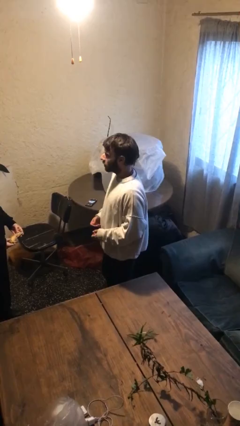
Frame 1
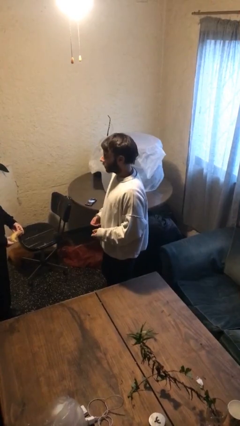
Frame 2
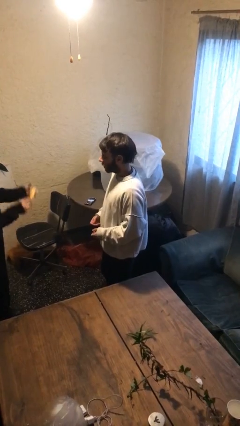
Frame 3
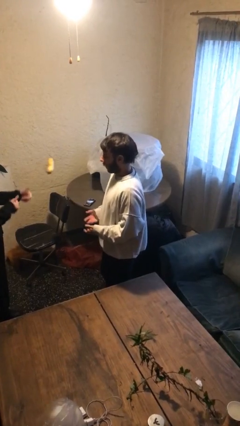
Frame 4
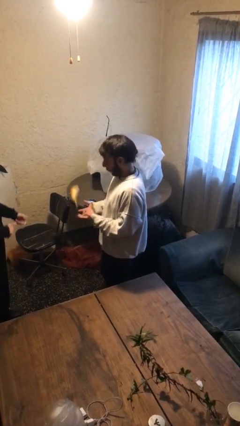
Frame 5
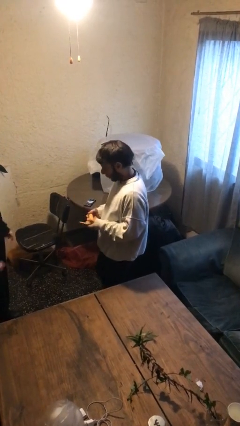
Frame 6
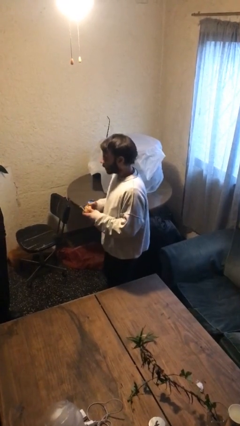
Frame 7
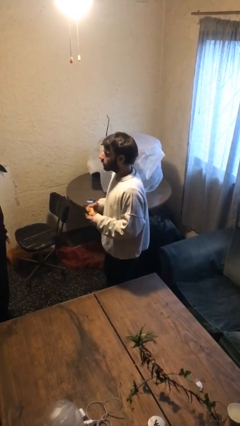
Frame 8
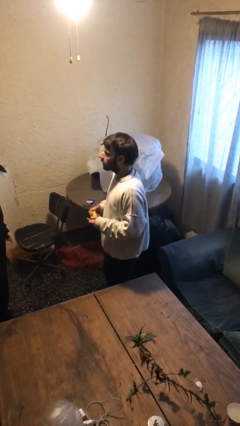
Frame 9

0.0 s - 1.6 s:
person catches object from person

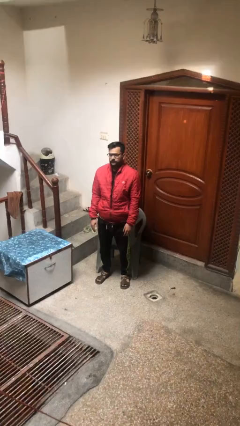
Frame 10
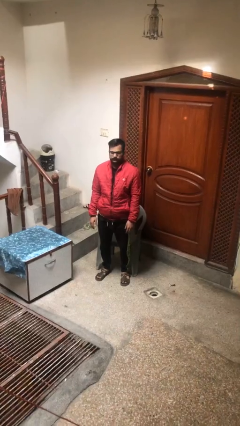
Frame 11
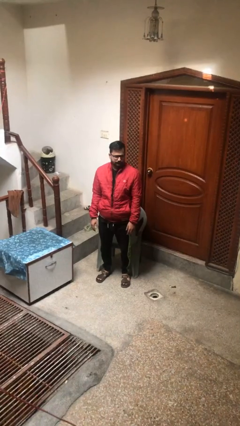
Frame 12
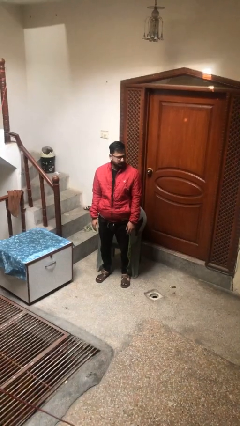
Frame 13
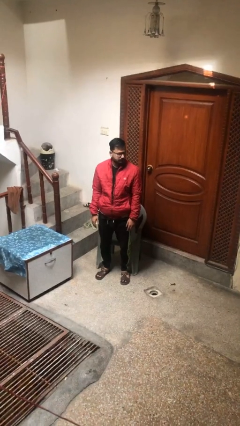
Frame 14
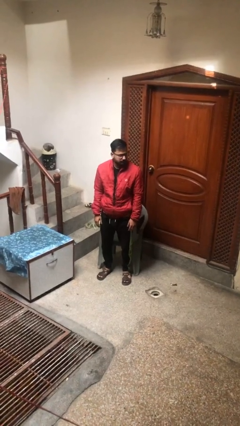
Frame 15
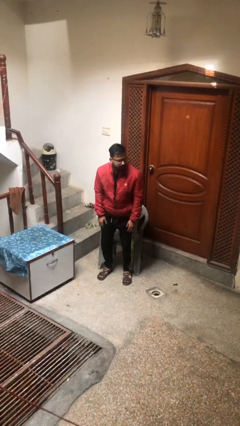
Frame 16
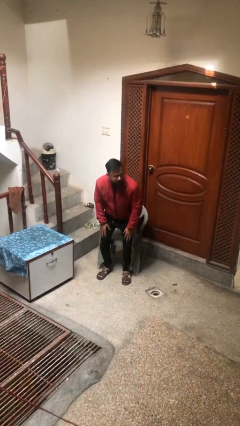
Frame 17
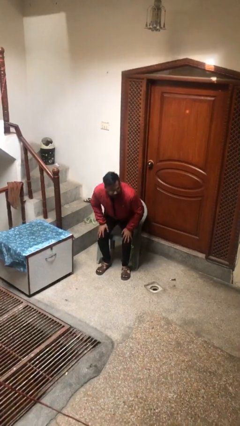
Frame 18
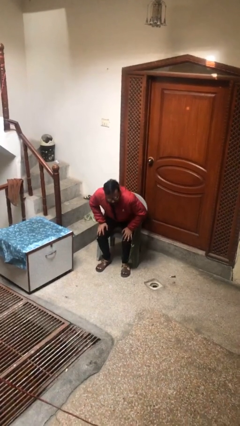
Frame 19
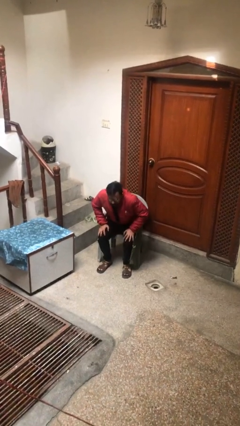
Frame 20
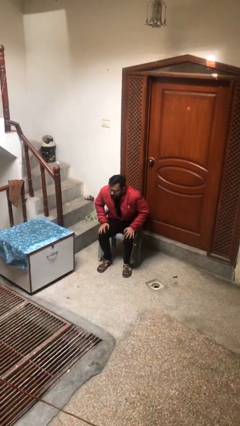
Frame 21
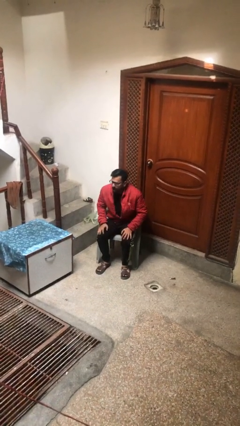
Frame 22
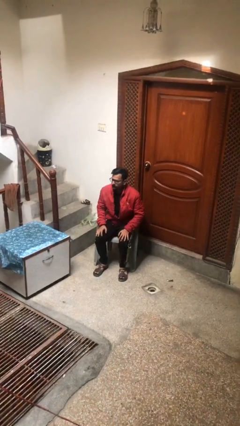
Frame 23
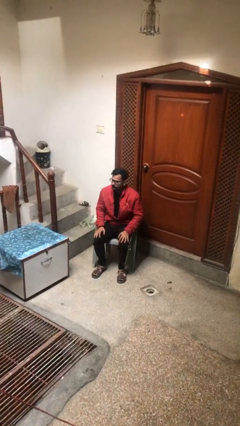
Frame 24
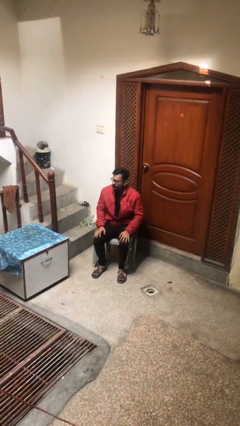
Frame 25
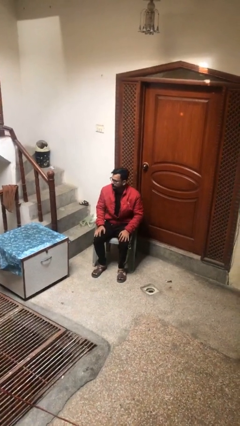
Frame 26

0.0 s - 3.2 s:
person sits down

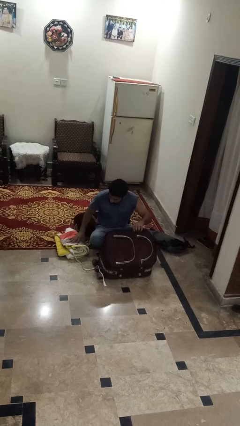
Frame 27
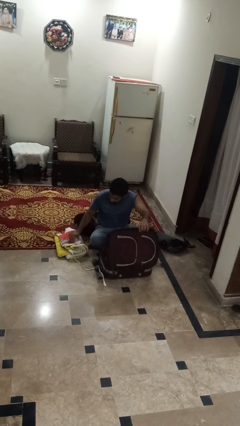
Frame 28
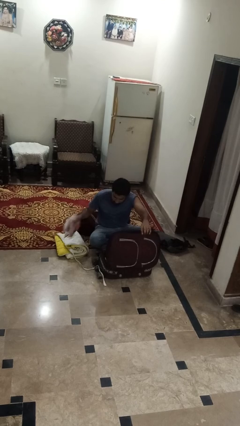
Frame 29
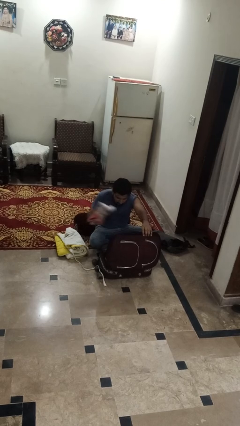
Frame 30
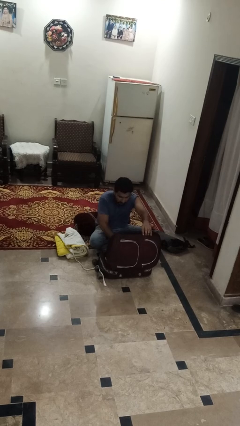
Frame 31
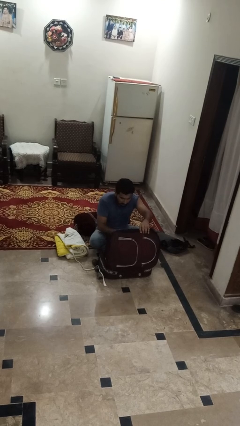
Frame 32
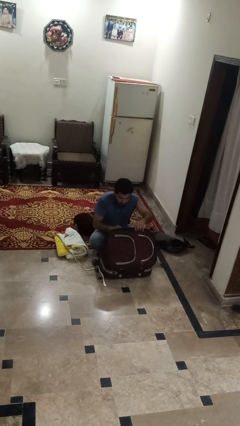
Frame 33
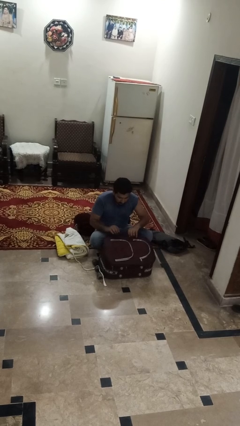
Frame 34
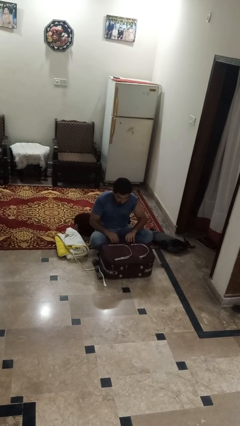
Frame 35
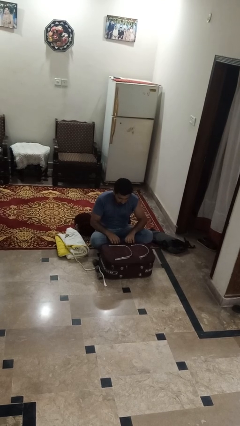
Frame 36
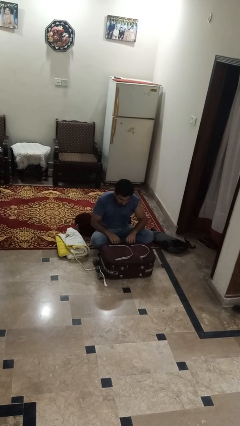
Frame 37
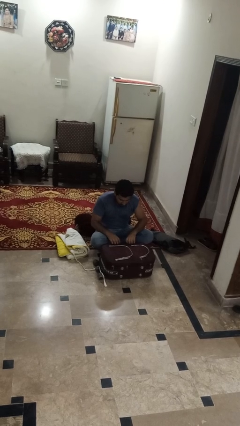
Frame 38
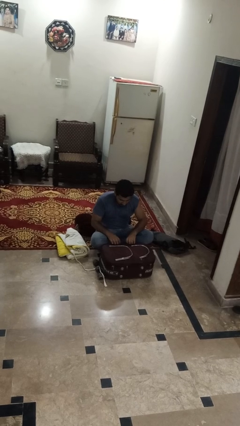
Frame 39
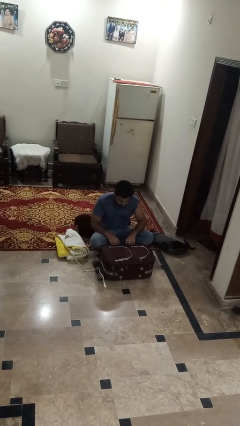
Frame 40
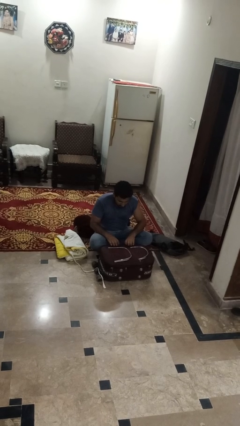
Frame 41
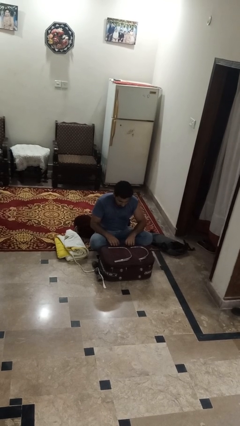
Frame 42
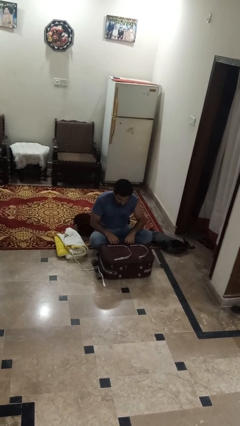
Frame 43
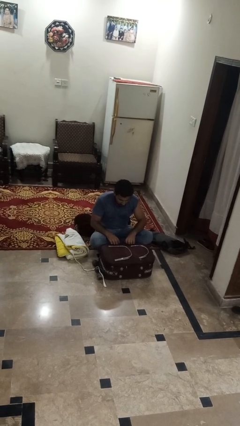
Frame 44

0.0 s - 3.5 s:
person loads clothes into suitcase

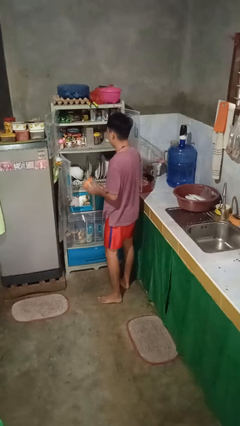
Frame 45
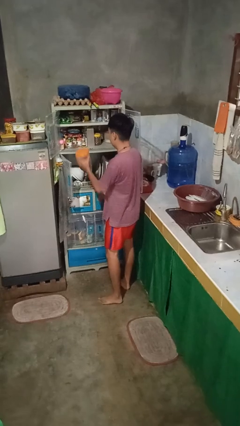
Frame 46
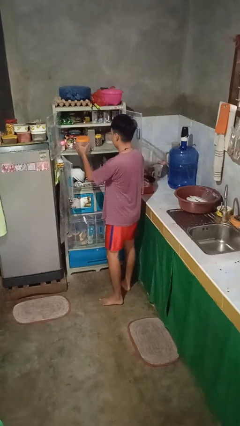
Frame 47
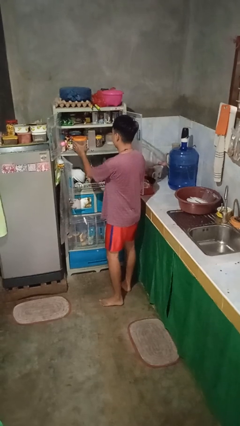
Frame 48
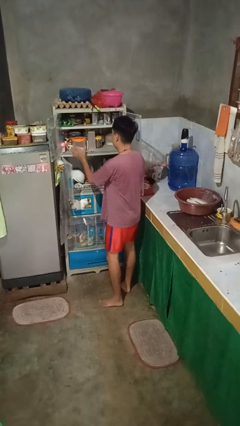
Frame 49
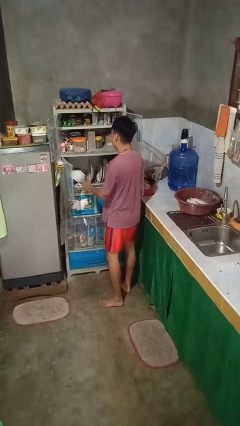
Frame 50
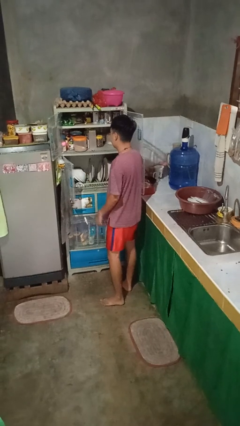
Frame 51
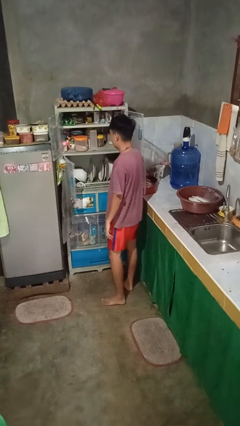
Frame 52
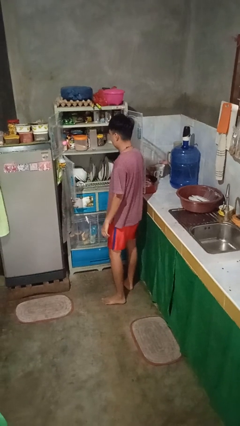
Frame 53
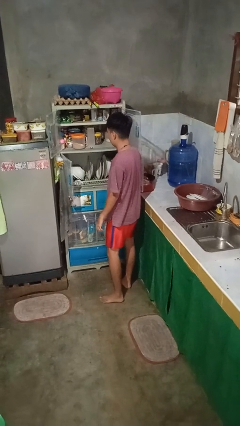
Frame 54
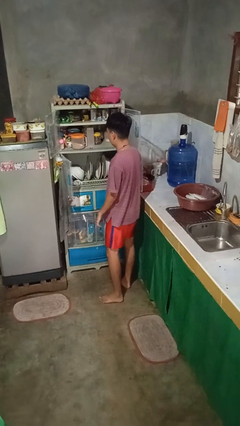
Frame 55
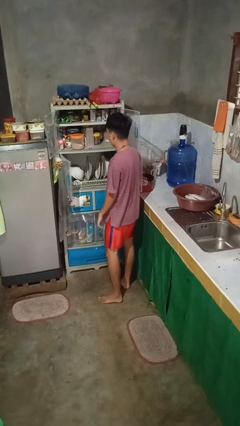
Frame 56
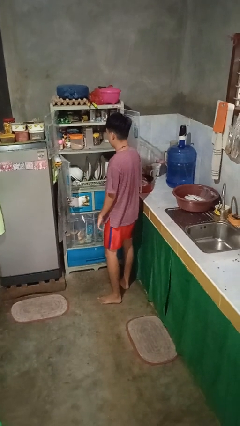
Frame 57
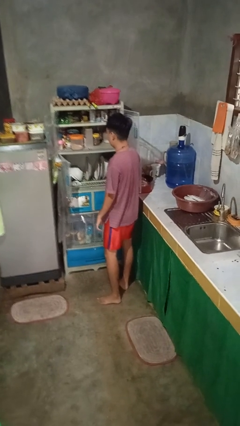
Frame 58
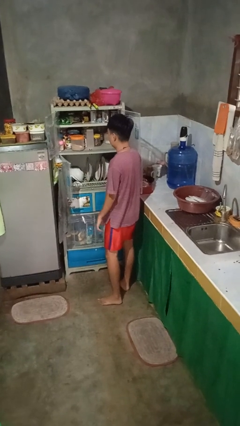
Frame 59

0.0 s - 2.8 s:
person puts object in cabinet

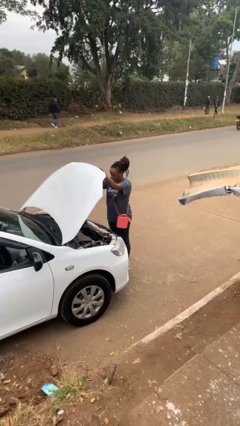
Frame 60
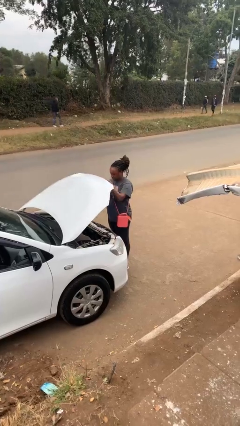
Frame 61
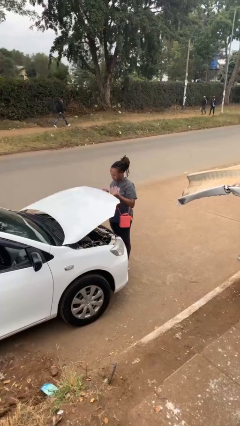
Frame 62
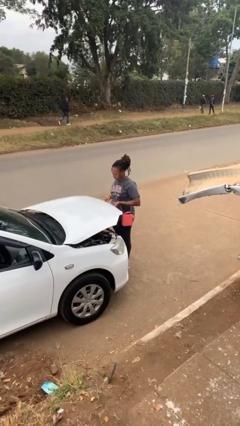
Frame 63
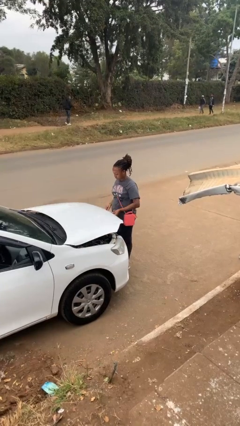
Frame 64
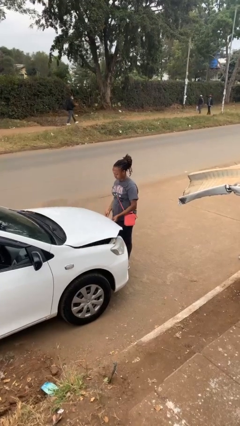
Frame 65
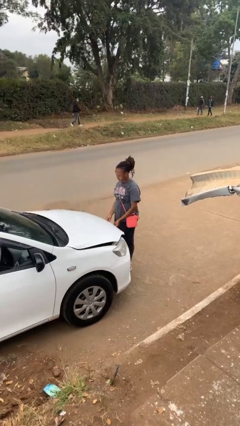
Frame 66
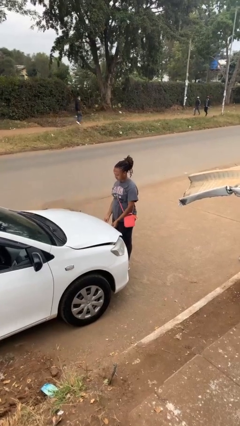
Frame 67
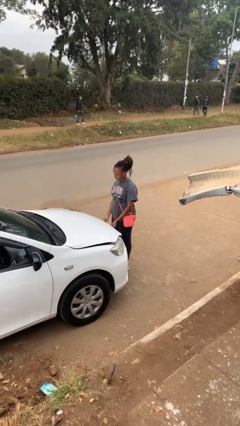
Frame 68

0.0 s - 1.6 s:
person closes car hood

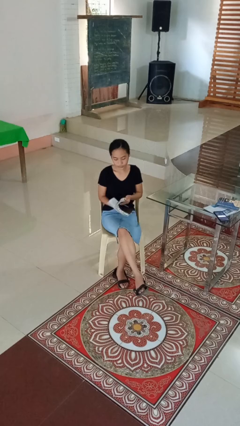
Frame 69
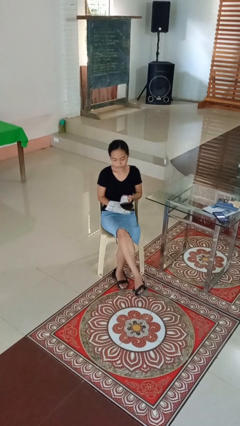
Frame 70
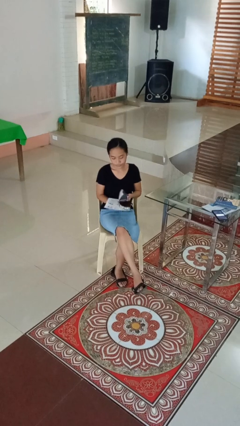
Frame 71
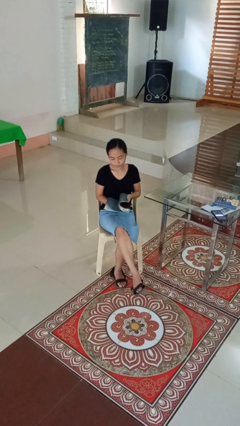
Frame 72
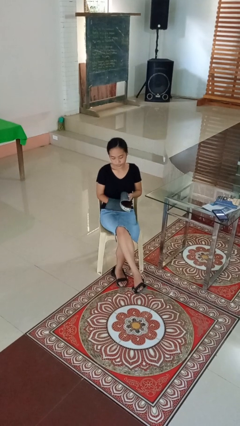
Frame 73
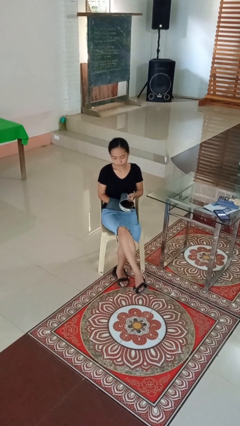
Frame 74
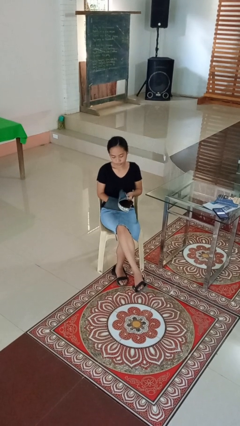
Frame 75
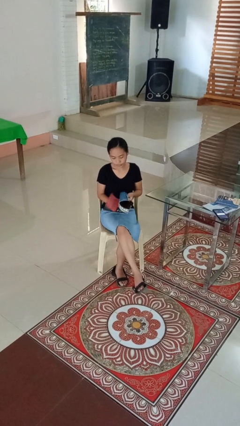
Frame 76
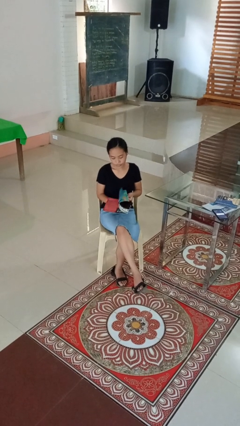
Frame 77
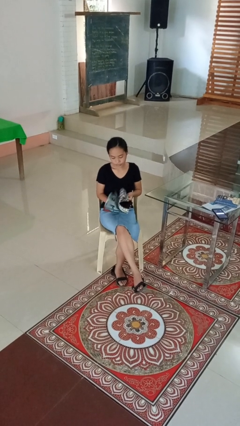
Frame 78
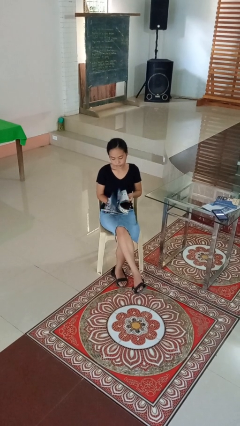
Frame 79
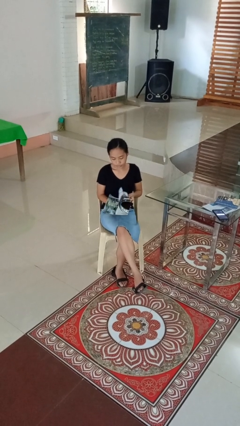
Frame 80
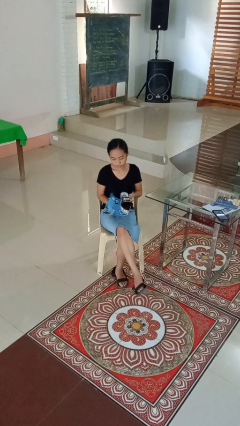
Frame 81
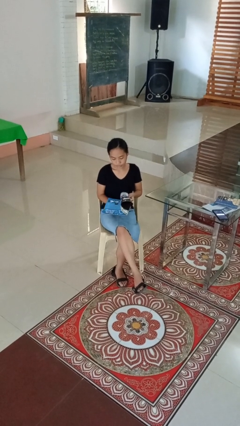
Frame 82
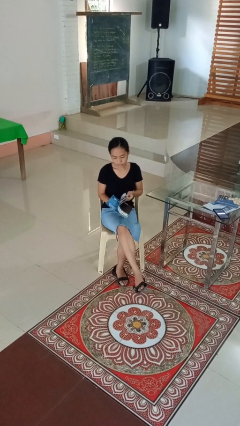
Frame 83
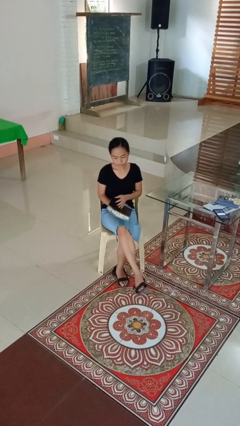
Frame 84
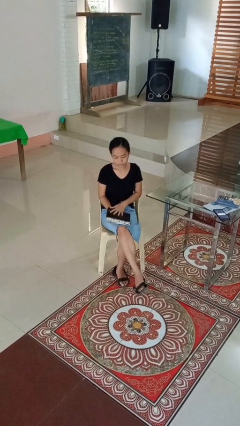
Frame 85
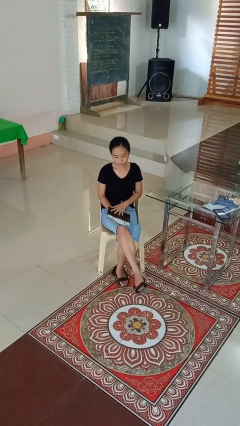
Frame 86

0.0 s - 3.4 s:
person reads magazine

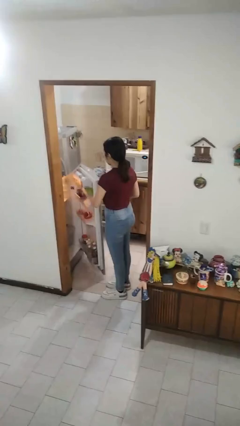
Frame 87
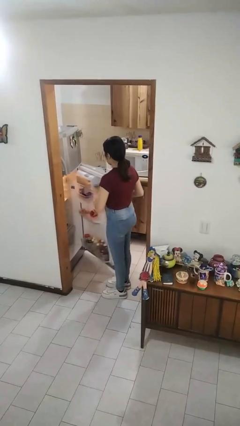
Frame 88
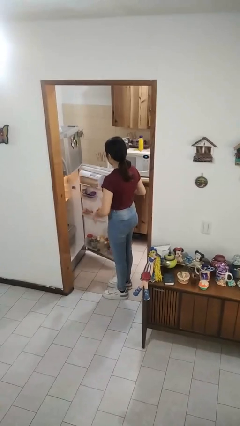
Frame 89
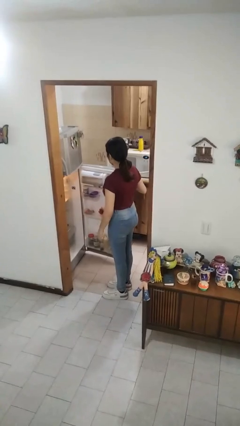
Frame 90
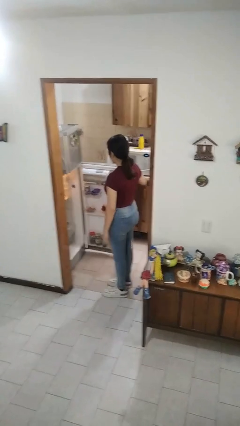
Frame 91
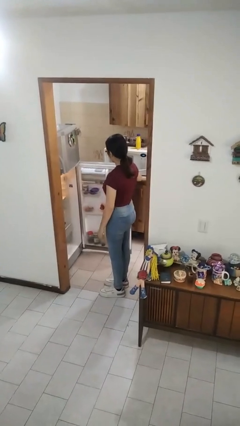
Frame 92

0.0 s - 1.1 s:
person opens refrigerator
